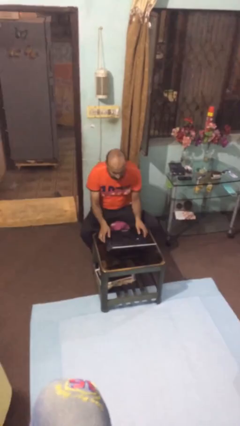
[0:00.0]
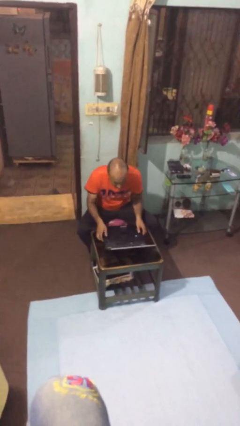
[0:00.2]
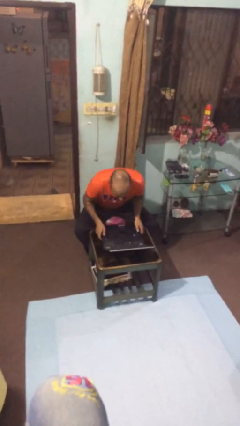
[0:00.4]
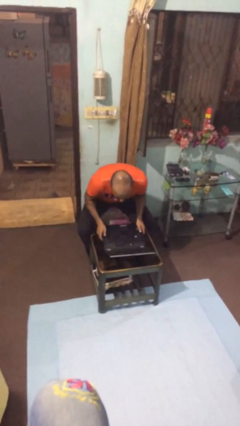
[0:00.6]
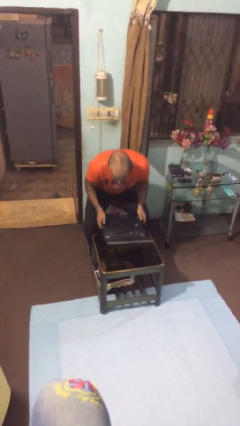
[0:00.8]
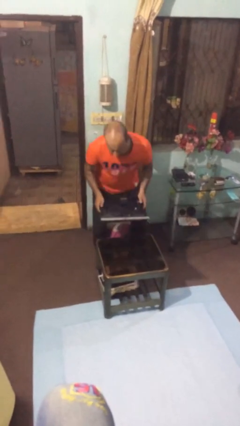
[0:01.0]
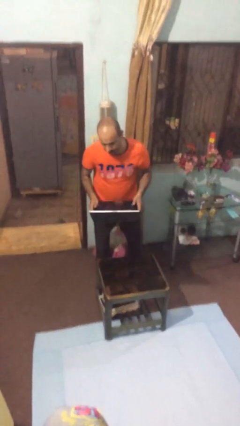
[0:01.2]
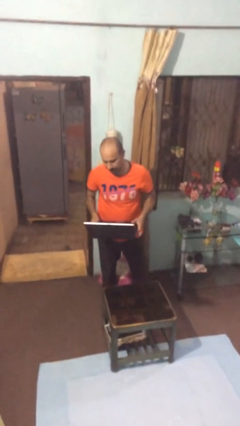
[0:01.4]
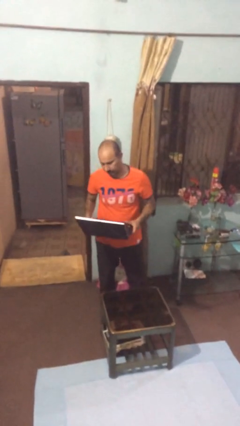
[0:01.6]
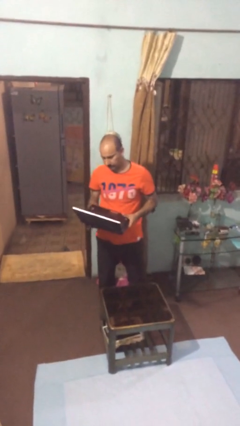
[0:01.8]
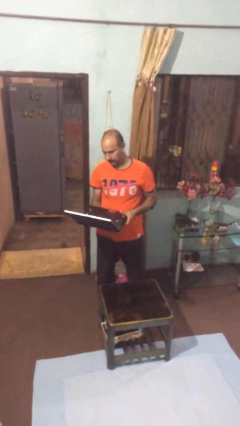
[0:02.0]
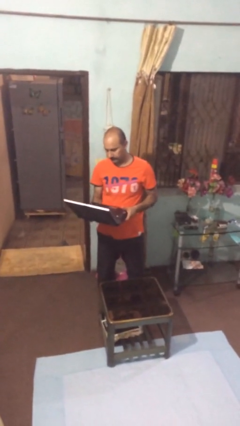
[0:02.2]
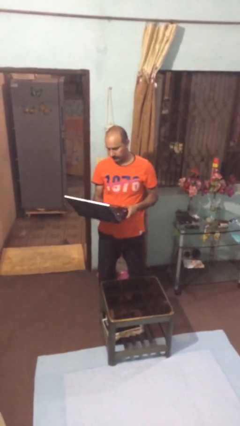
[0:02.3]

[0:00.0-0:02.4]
person stands up

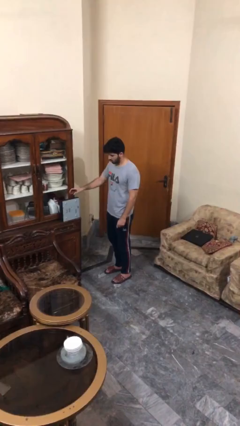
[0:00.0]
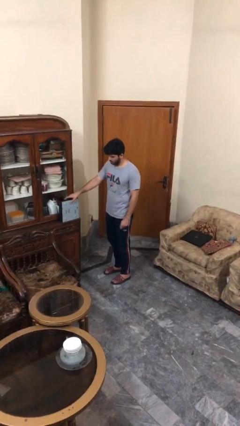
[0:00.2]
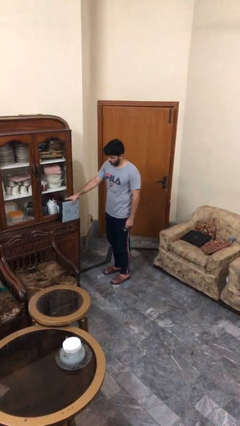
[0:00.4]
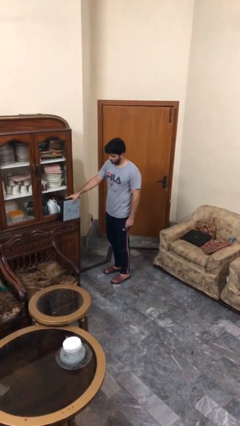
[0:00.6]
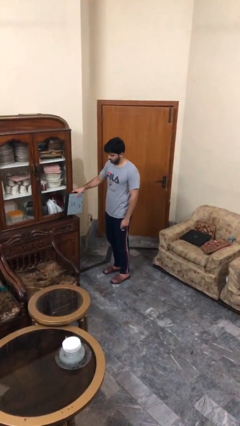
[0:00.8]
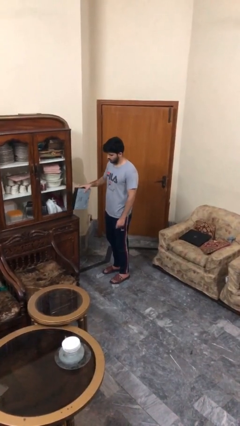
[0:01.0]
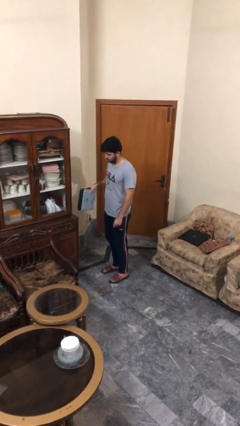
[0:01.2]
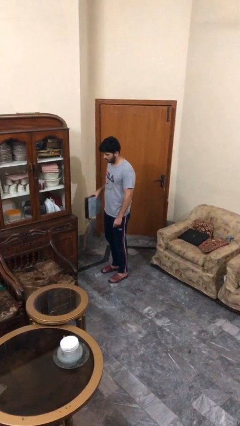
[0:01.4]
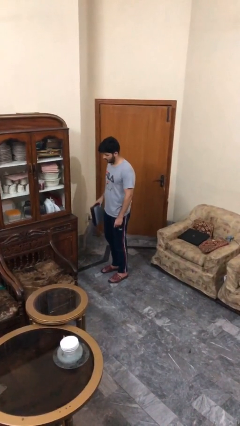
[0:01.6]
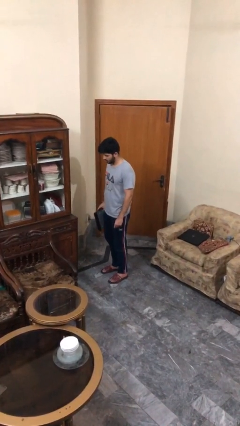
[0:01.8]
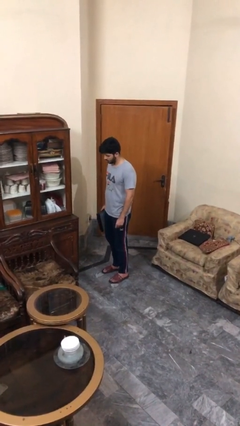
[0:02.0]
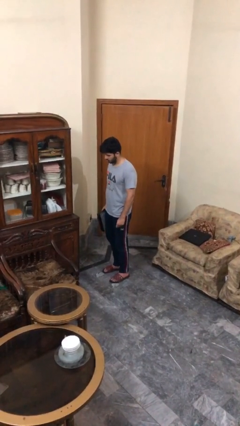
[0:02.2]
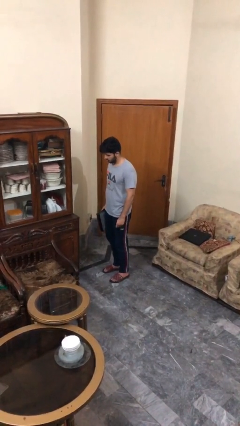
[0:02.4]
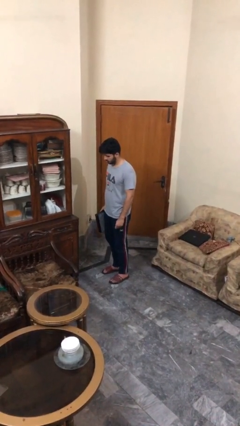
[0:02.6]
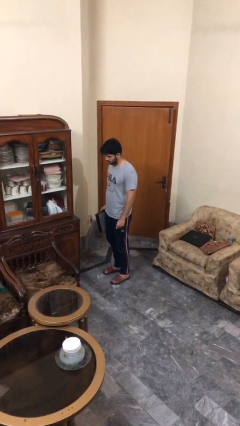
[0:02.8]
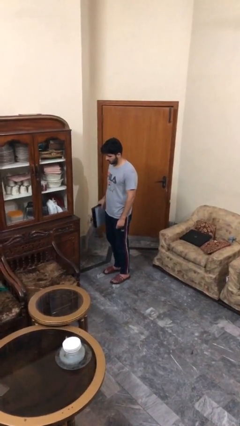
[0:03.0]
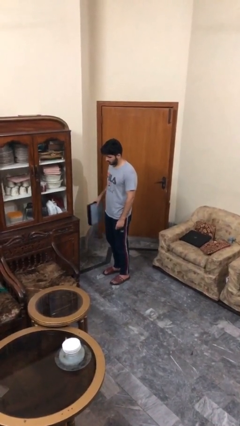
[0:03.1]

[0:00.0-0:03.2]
person picks up object from countertop

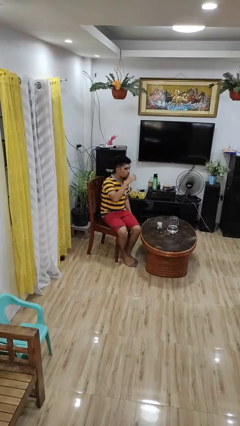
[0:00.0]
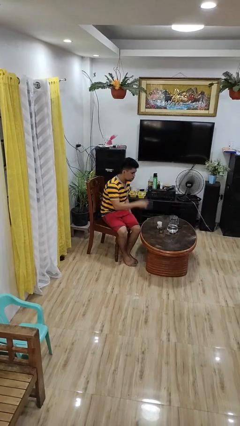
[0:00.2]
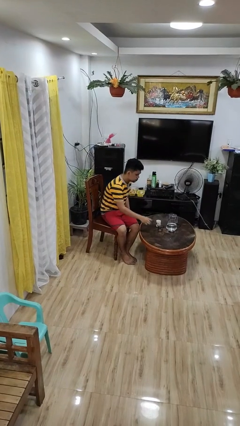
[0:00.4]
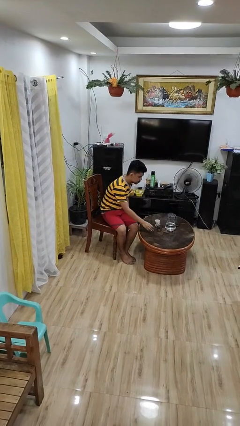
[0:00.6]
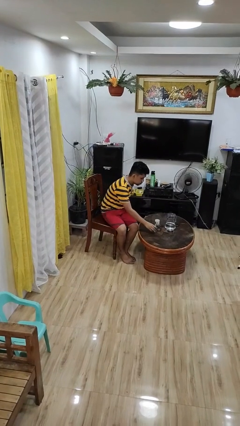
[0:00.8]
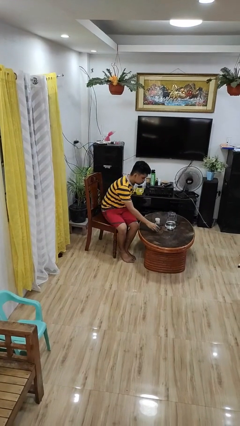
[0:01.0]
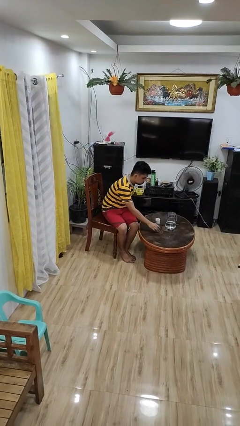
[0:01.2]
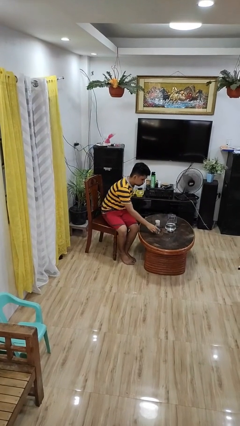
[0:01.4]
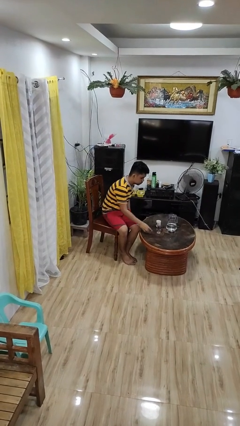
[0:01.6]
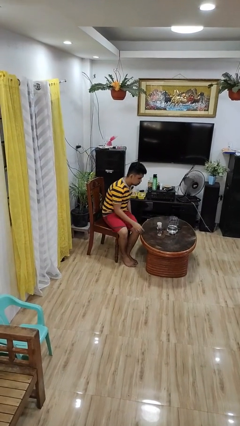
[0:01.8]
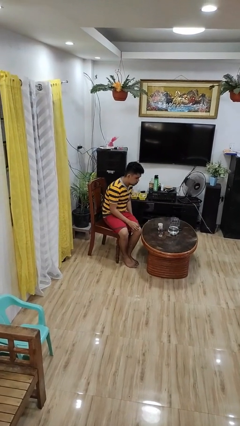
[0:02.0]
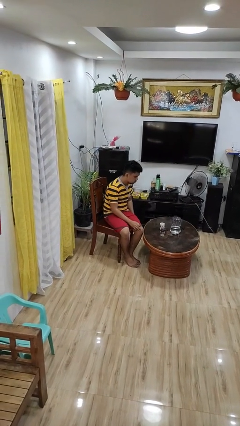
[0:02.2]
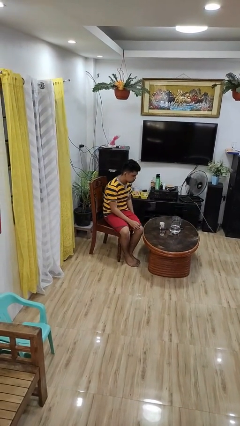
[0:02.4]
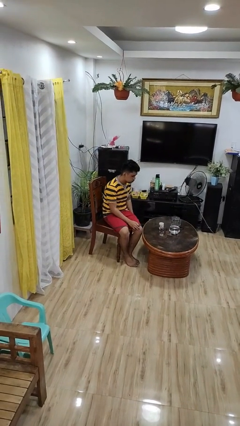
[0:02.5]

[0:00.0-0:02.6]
person puts down object on table

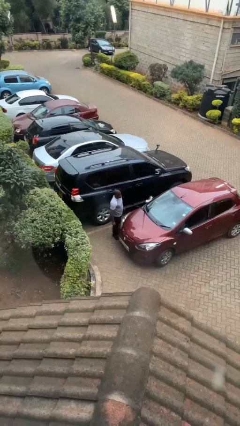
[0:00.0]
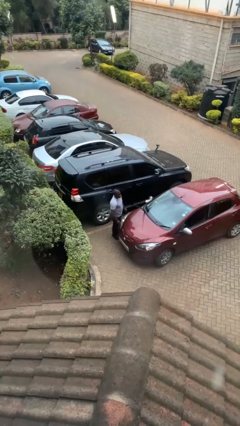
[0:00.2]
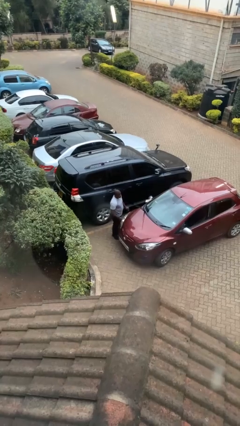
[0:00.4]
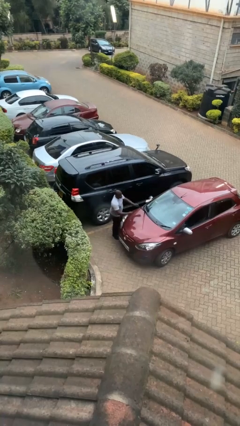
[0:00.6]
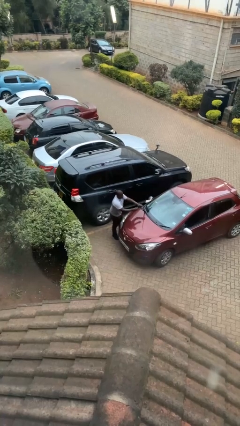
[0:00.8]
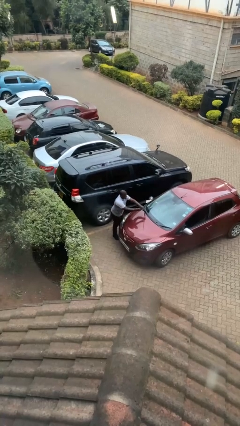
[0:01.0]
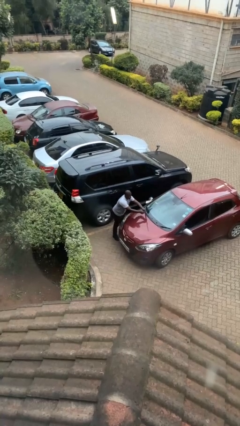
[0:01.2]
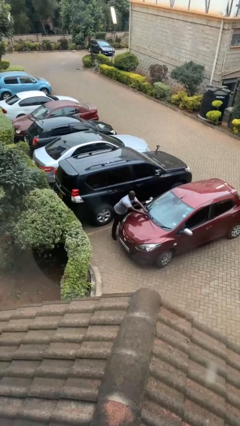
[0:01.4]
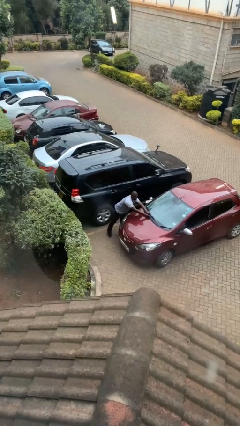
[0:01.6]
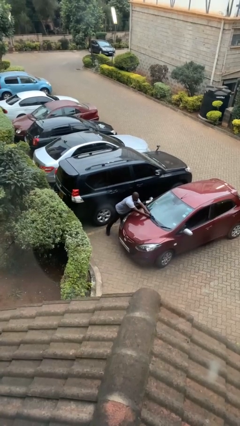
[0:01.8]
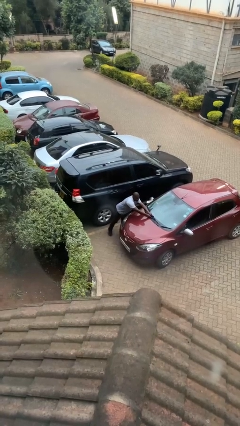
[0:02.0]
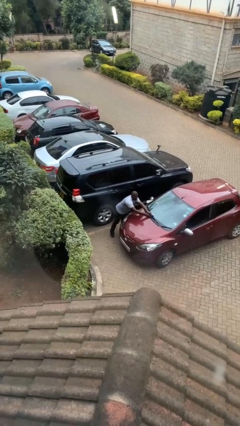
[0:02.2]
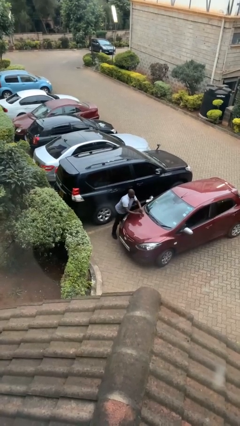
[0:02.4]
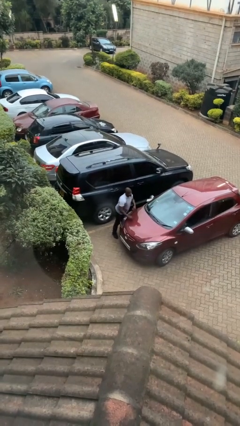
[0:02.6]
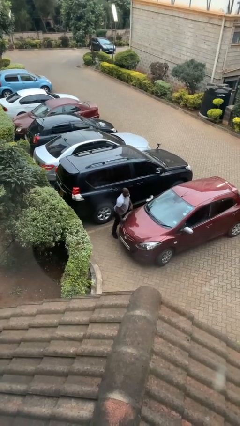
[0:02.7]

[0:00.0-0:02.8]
person flips down car wipers

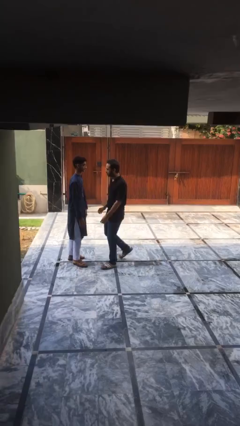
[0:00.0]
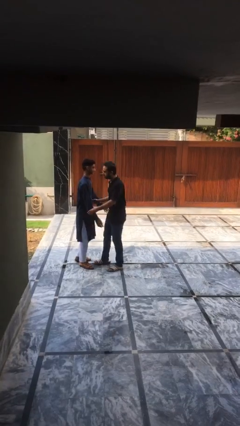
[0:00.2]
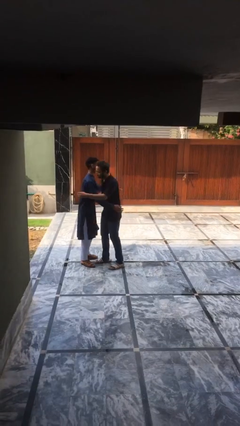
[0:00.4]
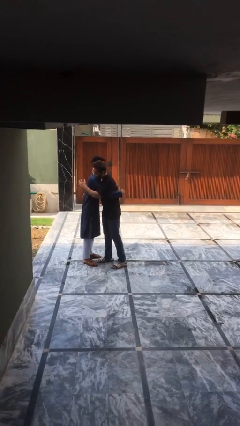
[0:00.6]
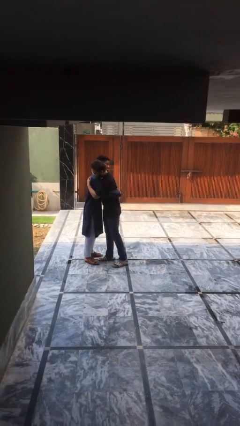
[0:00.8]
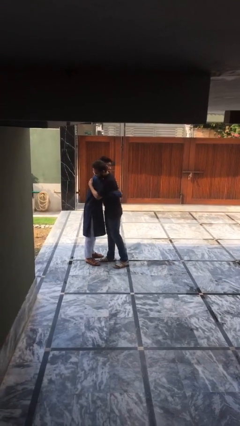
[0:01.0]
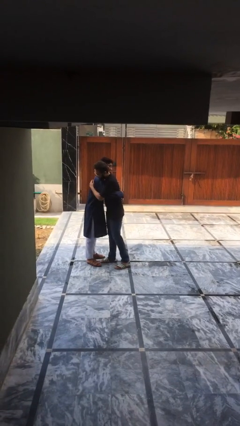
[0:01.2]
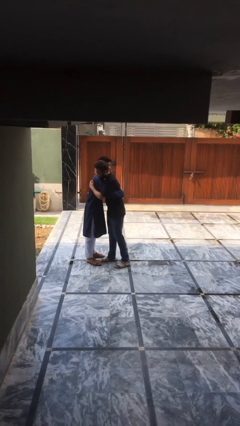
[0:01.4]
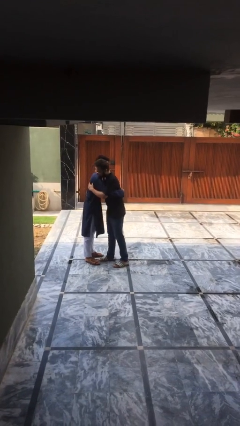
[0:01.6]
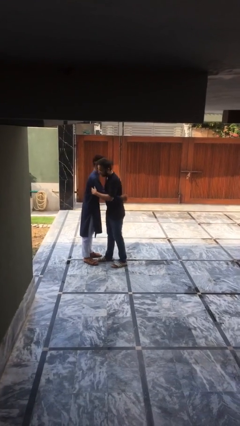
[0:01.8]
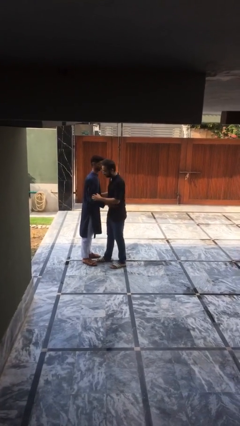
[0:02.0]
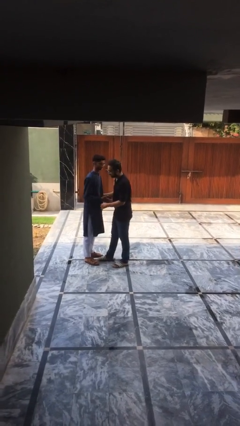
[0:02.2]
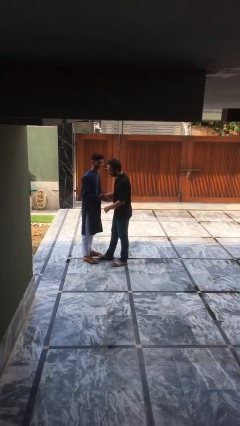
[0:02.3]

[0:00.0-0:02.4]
person embraces person

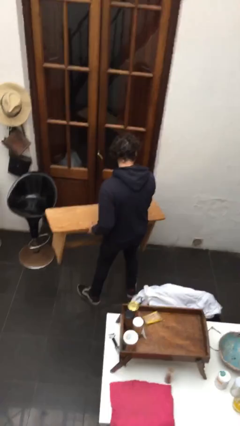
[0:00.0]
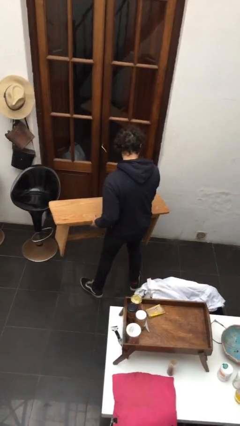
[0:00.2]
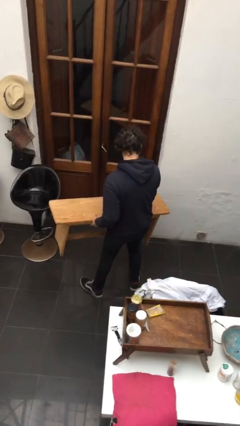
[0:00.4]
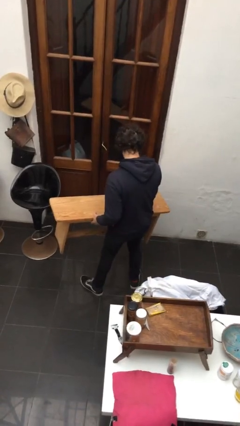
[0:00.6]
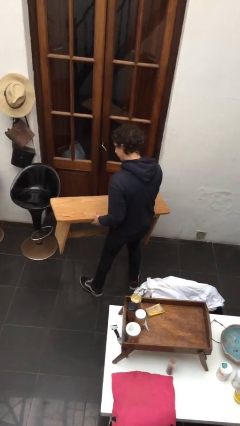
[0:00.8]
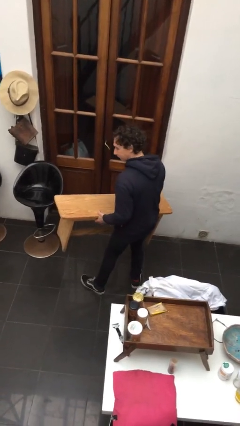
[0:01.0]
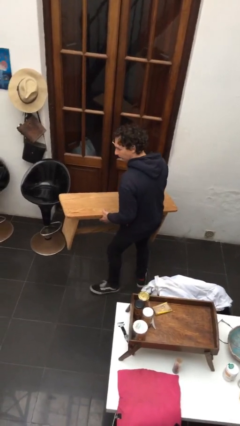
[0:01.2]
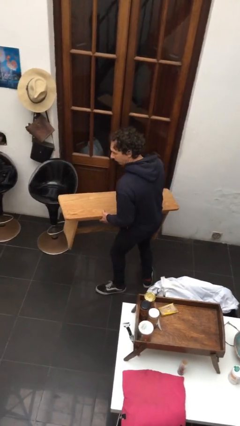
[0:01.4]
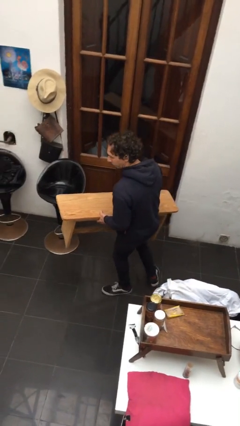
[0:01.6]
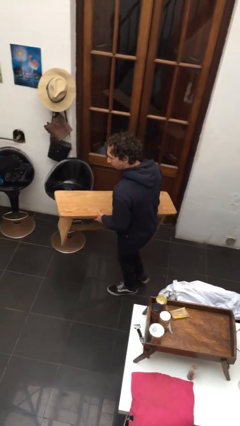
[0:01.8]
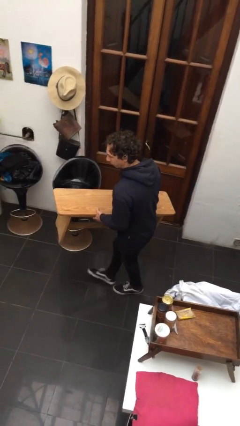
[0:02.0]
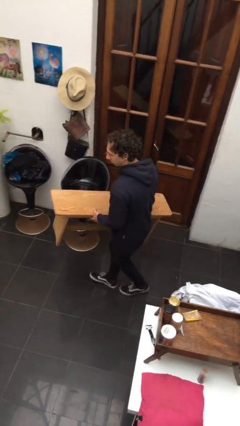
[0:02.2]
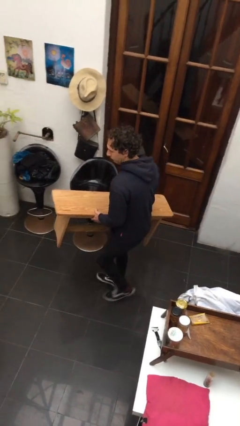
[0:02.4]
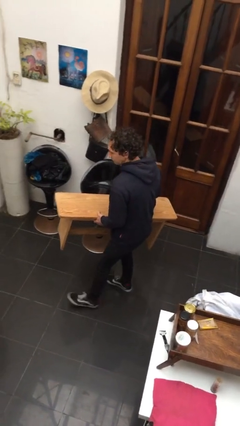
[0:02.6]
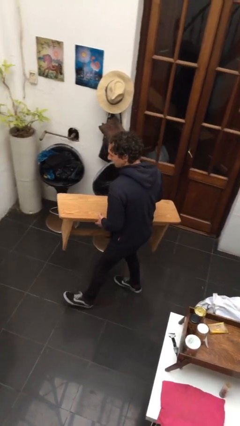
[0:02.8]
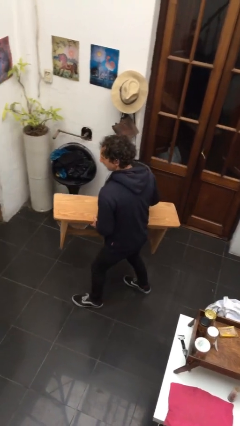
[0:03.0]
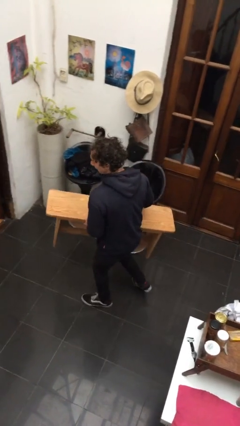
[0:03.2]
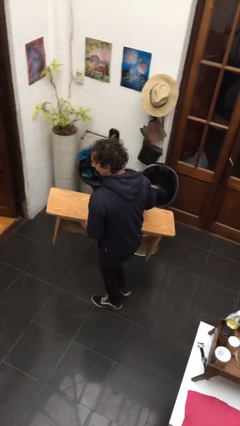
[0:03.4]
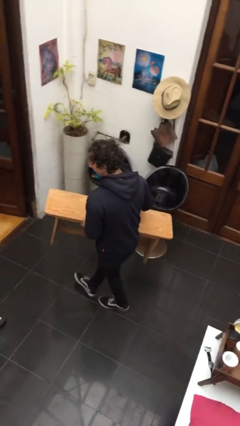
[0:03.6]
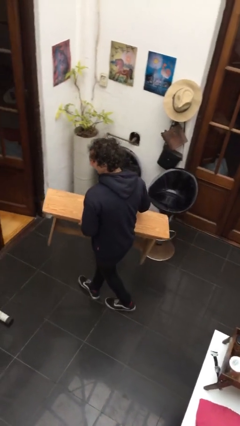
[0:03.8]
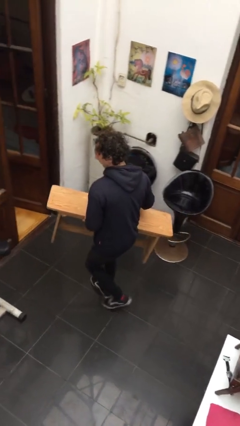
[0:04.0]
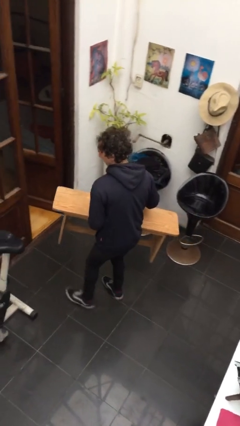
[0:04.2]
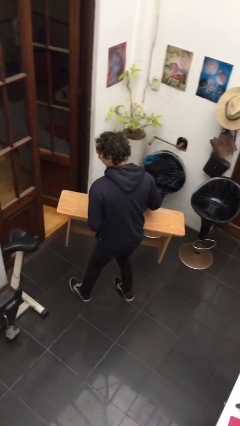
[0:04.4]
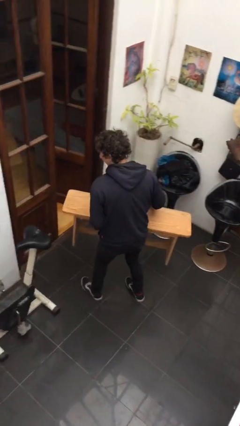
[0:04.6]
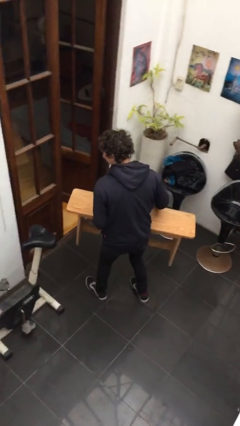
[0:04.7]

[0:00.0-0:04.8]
person carries furniture
